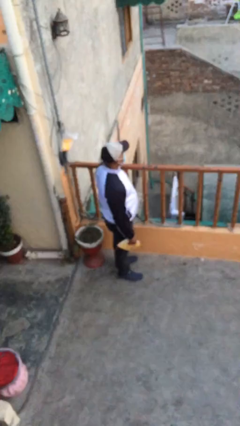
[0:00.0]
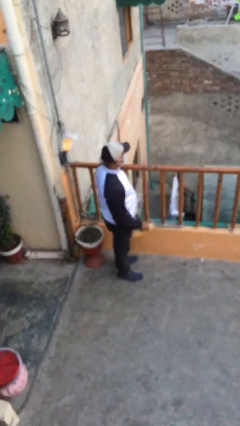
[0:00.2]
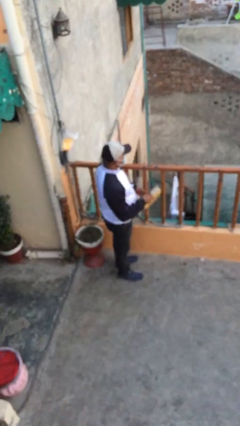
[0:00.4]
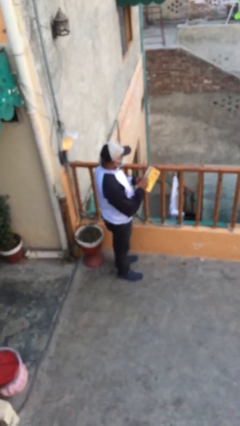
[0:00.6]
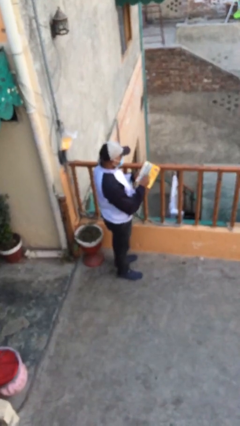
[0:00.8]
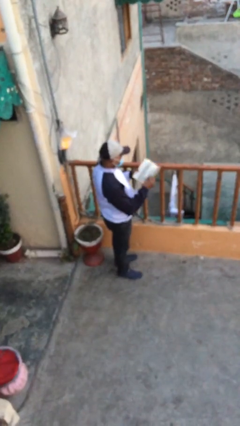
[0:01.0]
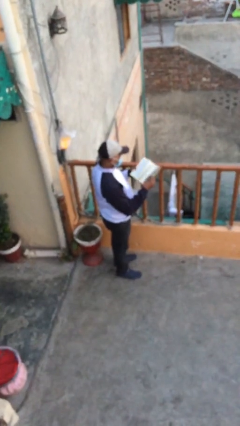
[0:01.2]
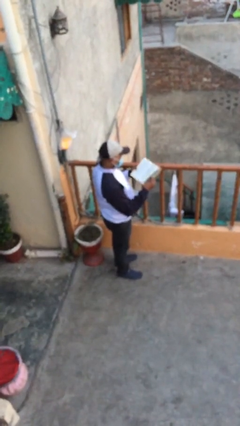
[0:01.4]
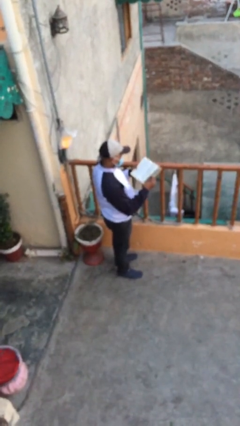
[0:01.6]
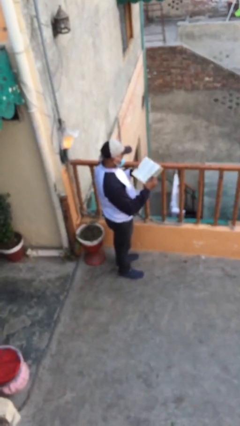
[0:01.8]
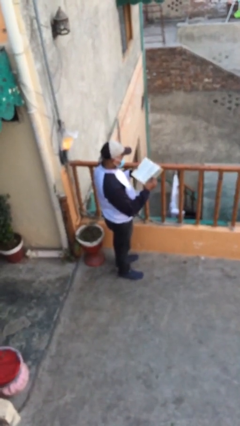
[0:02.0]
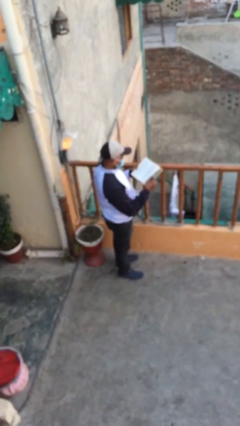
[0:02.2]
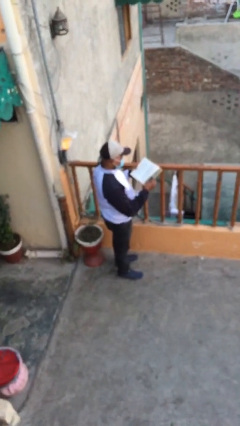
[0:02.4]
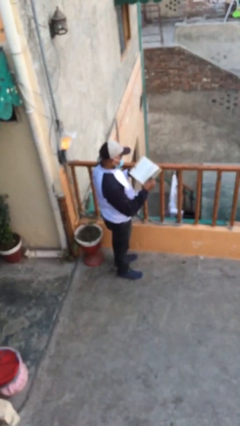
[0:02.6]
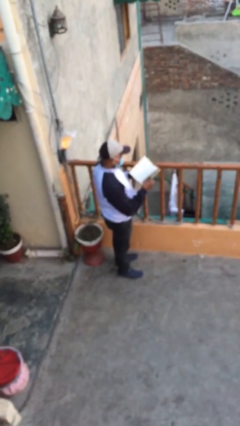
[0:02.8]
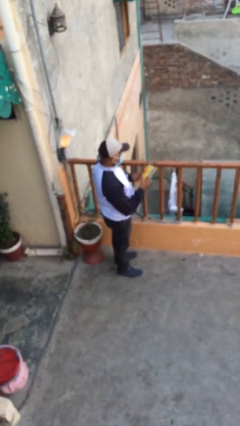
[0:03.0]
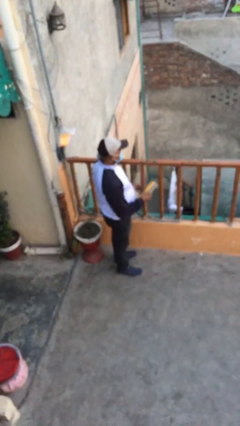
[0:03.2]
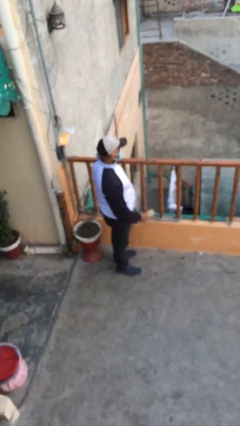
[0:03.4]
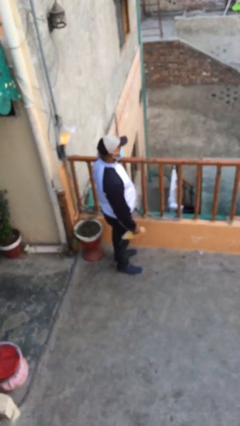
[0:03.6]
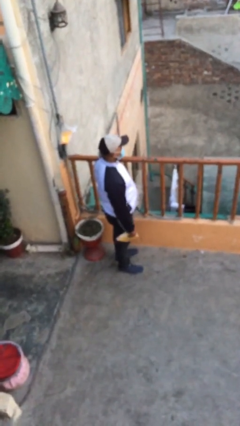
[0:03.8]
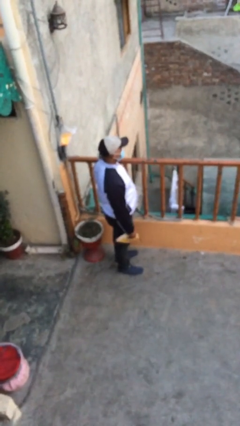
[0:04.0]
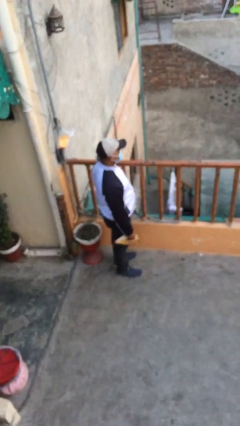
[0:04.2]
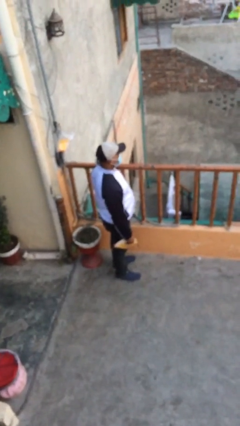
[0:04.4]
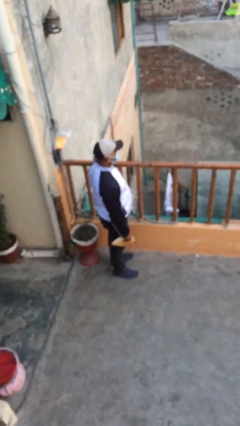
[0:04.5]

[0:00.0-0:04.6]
person reads document

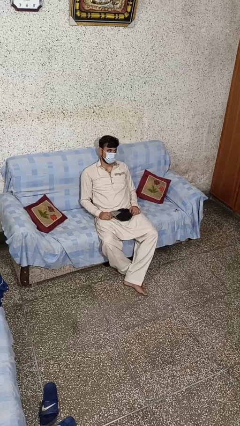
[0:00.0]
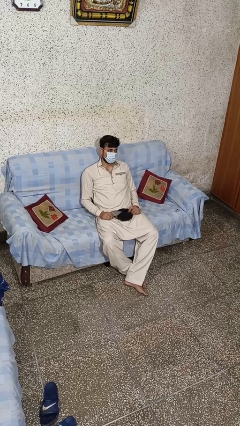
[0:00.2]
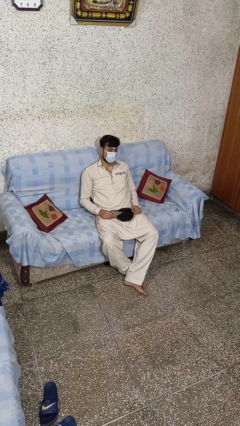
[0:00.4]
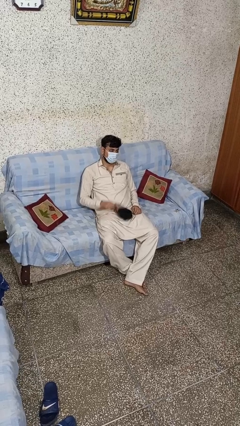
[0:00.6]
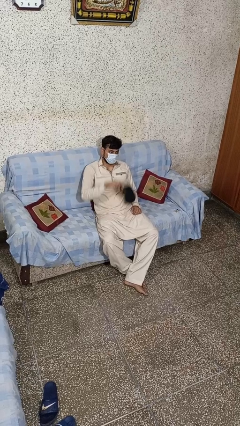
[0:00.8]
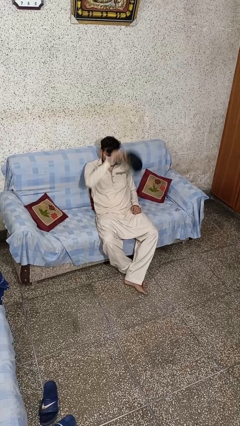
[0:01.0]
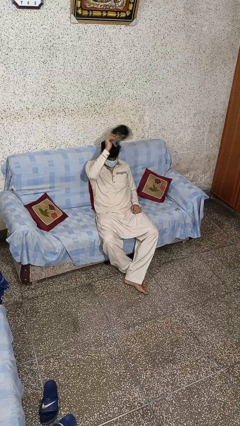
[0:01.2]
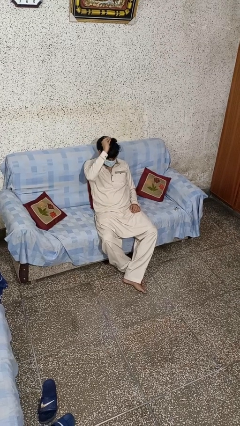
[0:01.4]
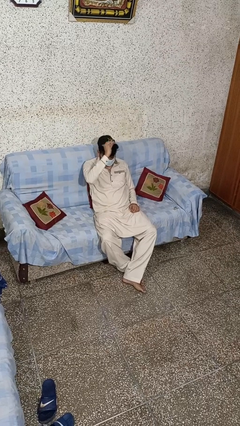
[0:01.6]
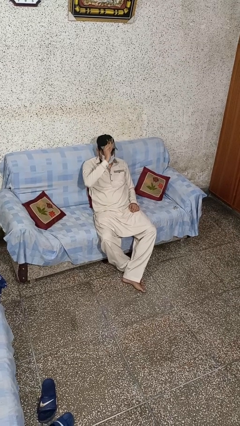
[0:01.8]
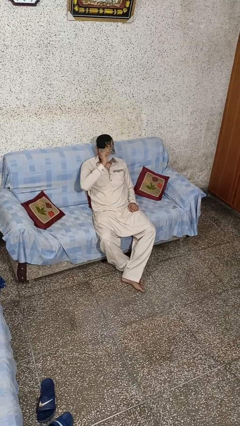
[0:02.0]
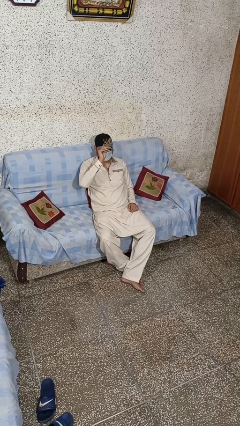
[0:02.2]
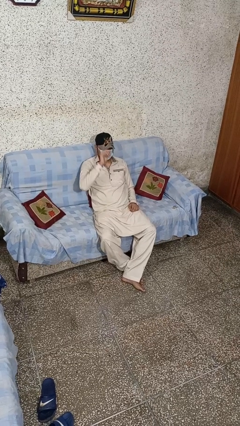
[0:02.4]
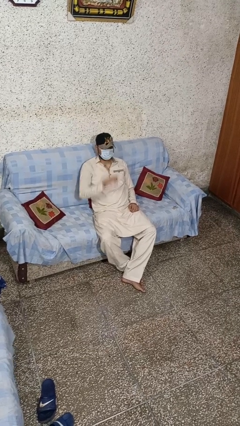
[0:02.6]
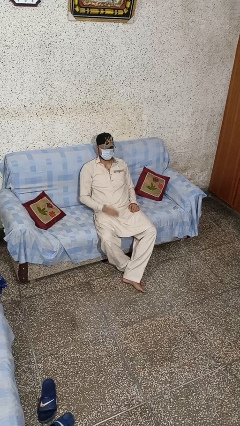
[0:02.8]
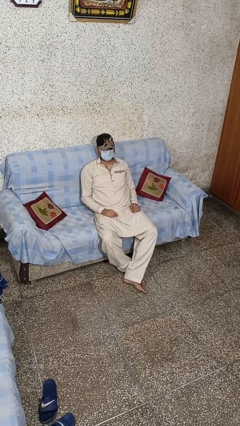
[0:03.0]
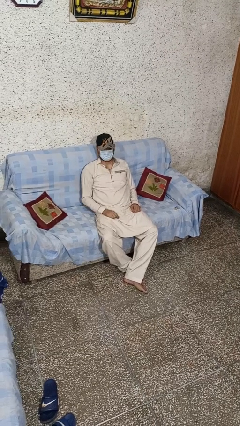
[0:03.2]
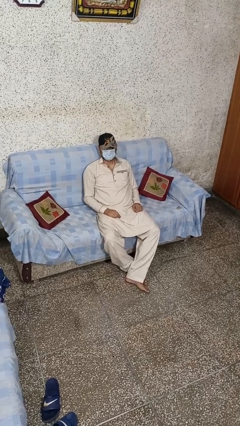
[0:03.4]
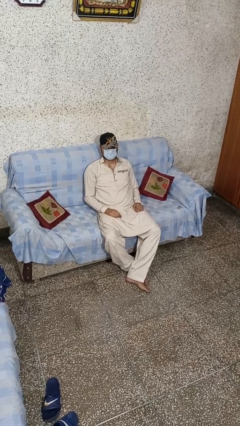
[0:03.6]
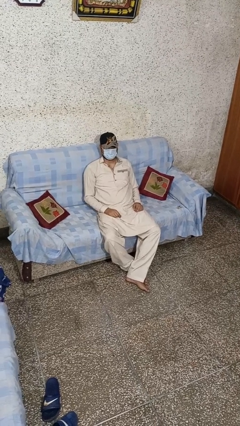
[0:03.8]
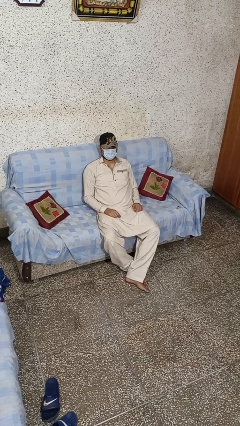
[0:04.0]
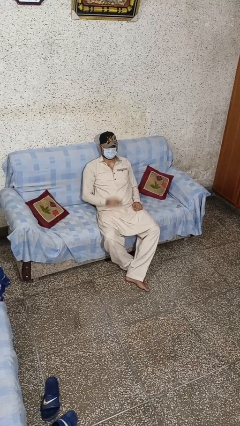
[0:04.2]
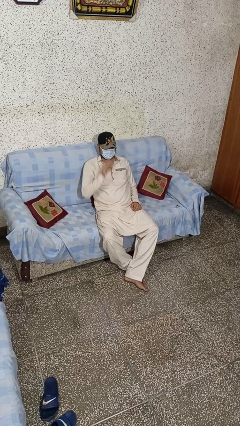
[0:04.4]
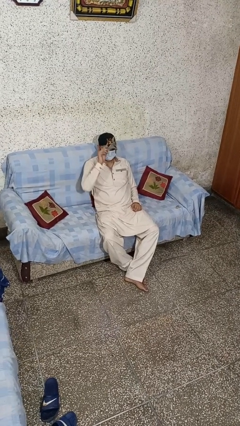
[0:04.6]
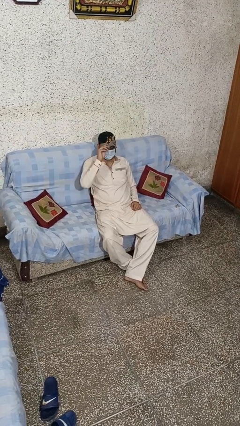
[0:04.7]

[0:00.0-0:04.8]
person puts on hat

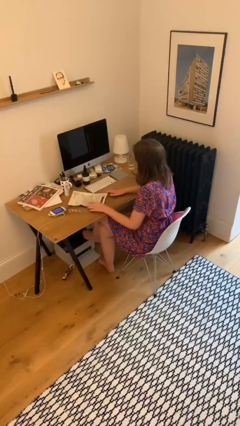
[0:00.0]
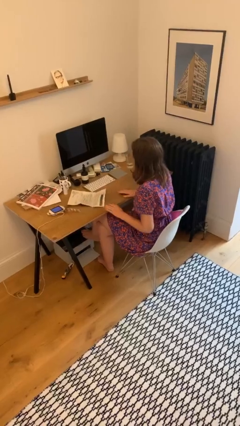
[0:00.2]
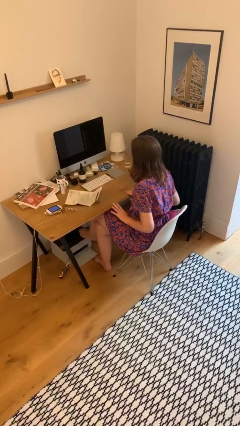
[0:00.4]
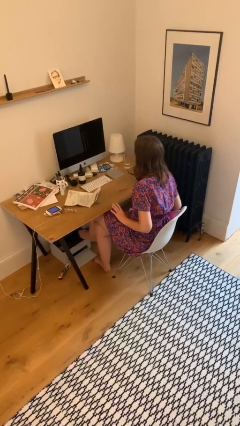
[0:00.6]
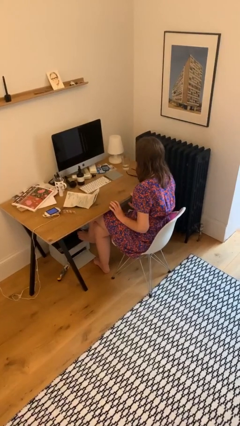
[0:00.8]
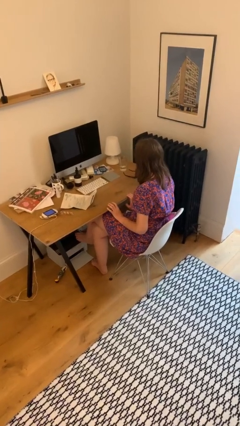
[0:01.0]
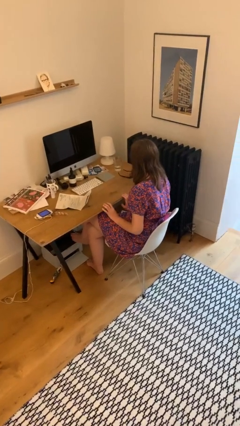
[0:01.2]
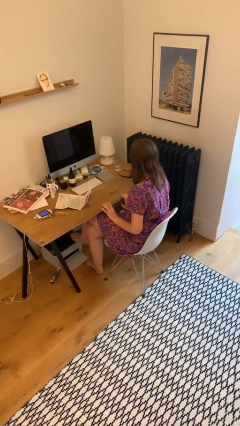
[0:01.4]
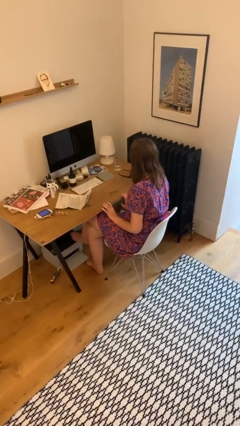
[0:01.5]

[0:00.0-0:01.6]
person puts down object on table

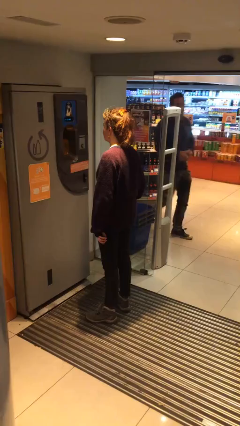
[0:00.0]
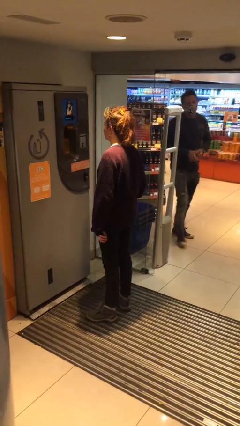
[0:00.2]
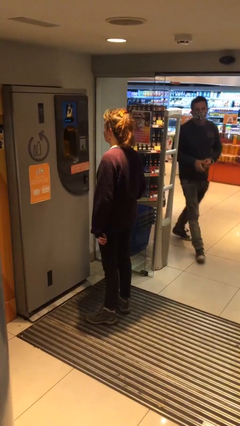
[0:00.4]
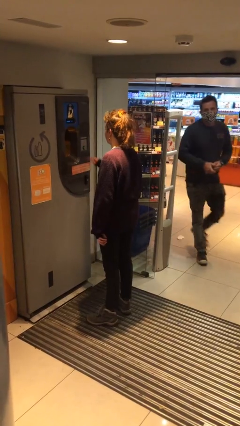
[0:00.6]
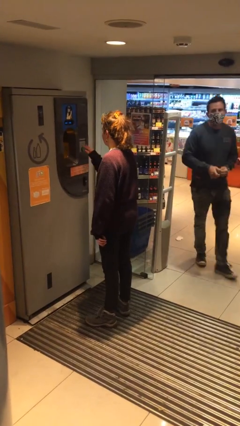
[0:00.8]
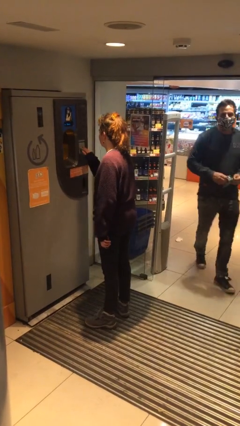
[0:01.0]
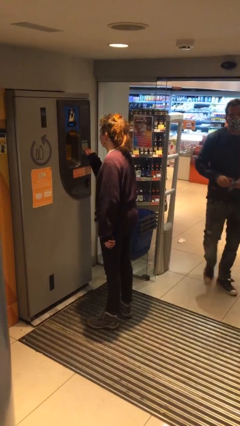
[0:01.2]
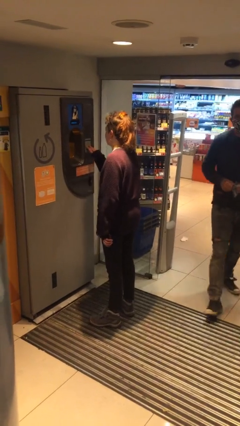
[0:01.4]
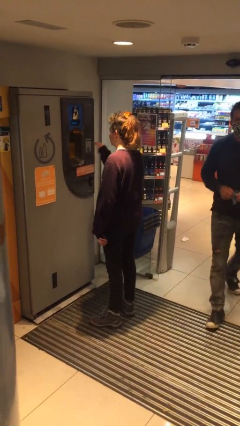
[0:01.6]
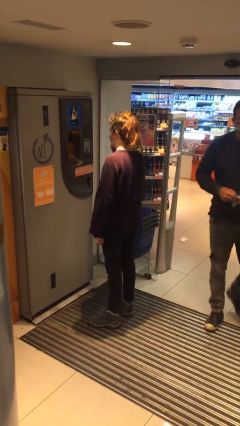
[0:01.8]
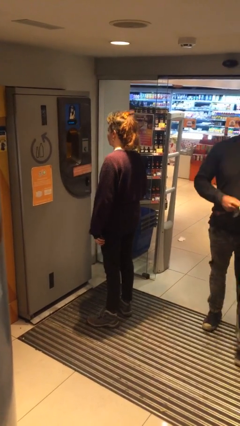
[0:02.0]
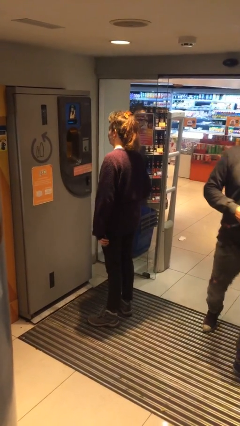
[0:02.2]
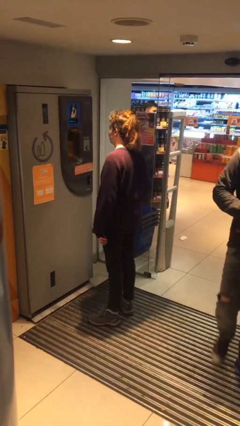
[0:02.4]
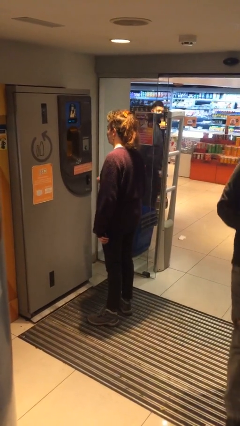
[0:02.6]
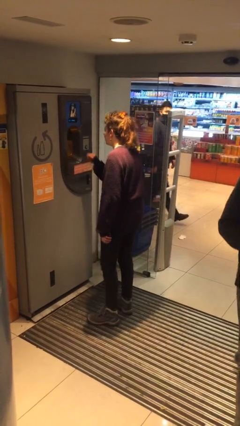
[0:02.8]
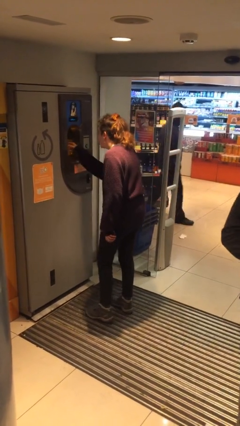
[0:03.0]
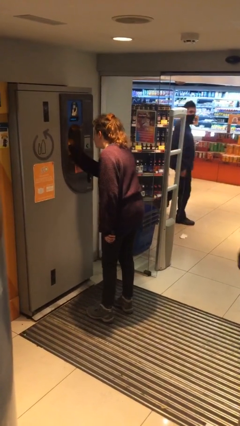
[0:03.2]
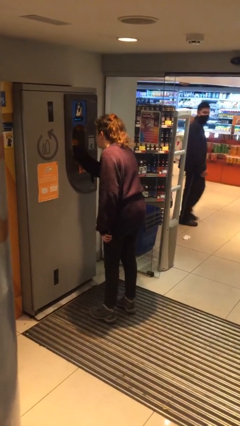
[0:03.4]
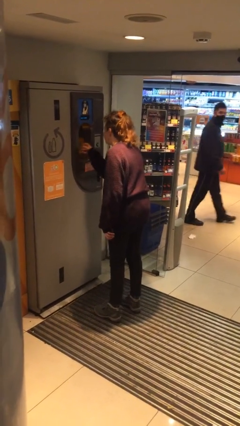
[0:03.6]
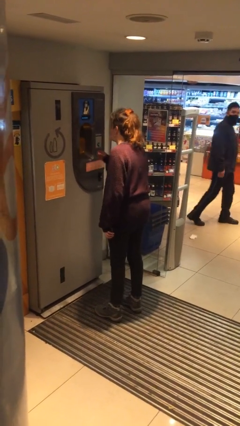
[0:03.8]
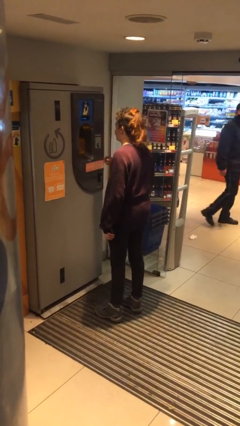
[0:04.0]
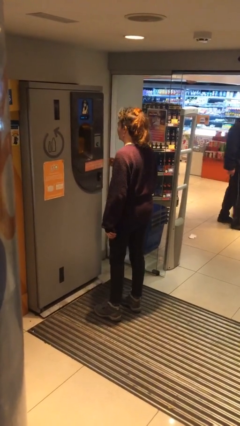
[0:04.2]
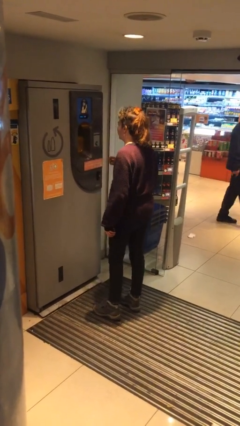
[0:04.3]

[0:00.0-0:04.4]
person purchases from machine

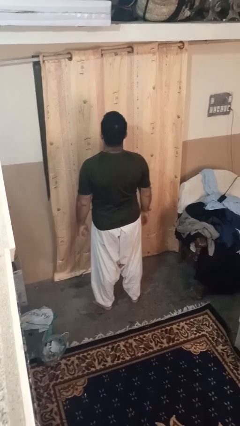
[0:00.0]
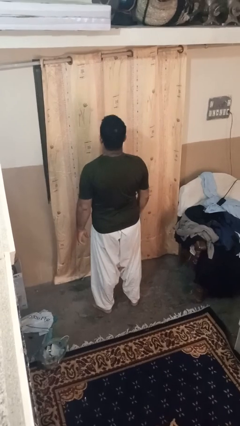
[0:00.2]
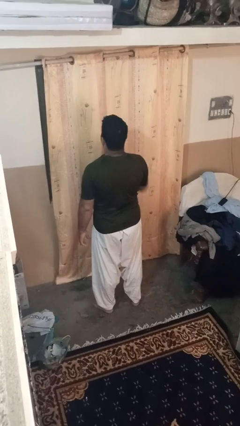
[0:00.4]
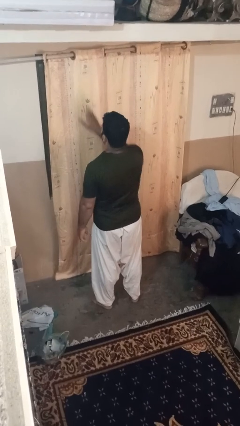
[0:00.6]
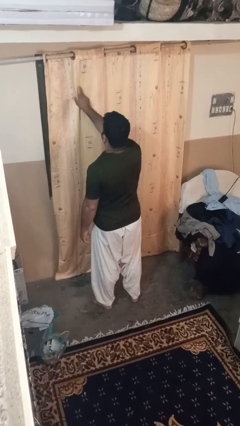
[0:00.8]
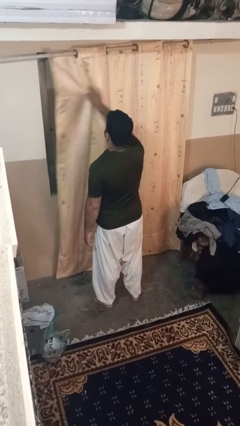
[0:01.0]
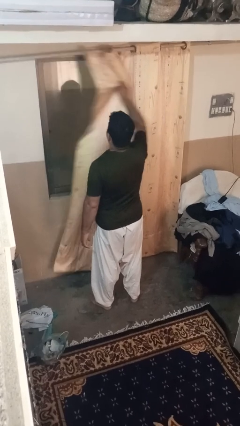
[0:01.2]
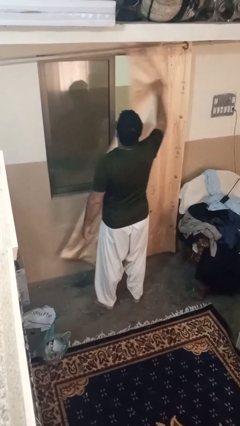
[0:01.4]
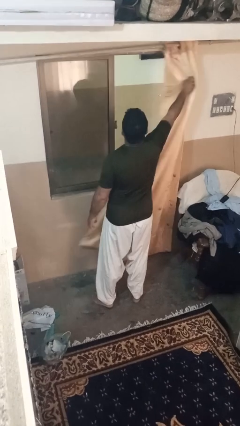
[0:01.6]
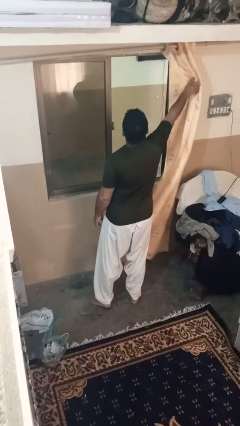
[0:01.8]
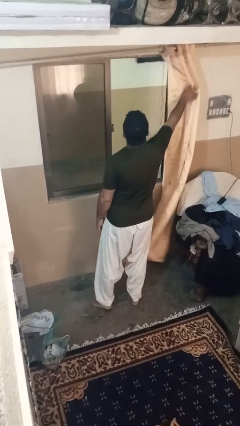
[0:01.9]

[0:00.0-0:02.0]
person opens curtains
